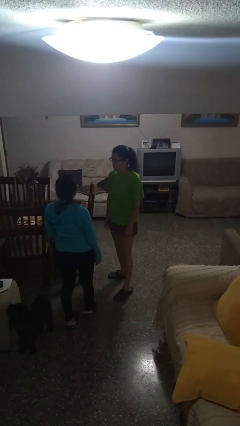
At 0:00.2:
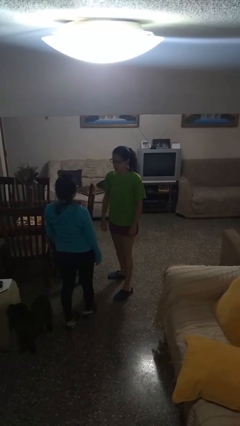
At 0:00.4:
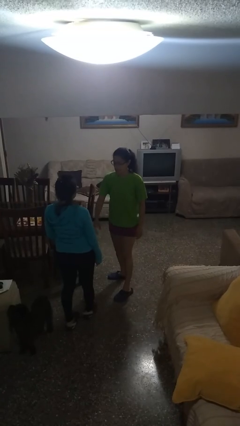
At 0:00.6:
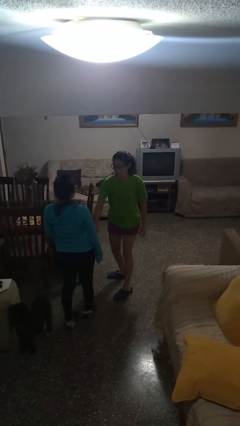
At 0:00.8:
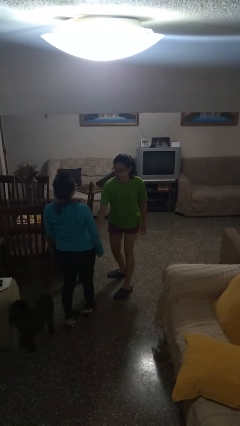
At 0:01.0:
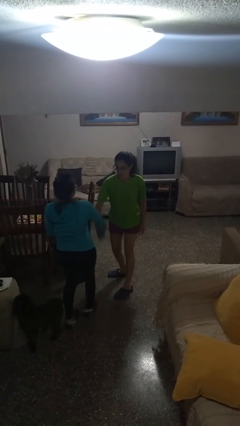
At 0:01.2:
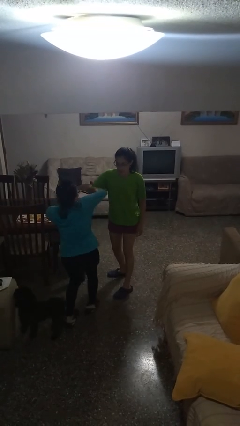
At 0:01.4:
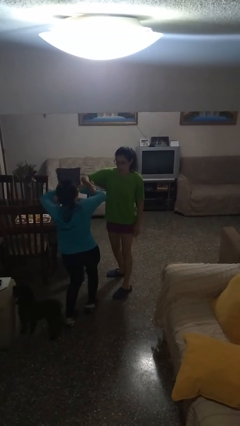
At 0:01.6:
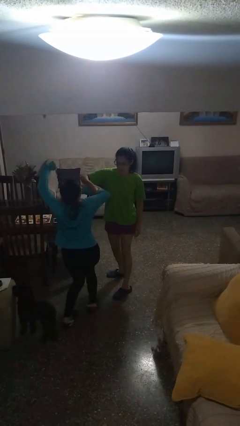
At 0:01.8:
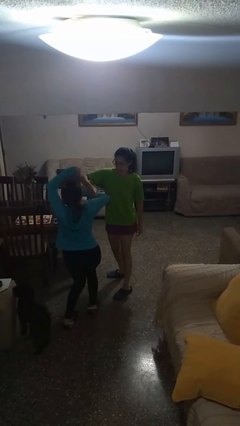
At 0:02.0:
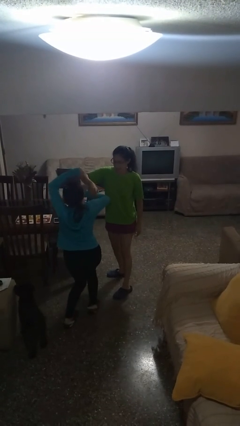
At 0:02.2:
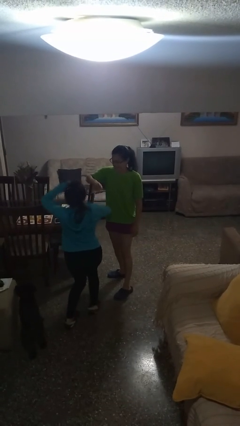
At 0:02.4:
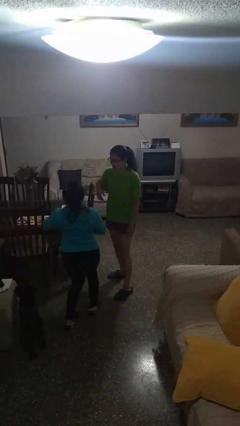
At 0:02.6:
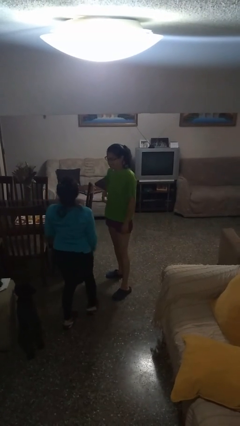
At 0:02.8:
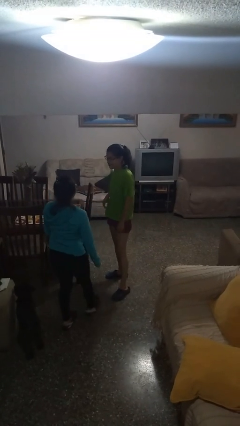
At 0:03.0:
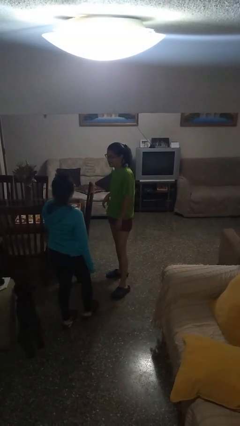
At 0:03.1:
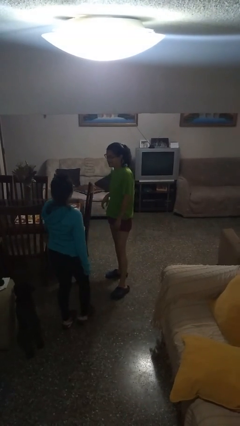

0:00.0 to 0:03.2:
person grabs person by forearm

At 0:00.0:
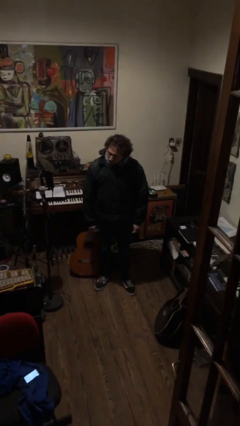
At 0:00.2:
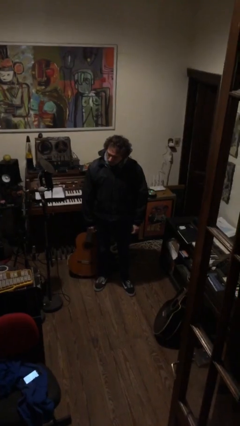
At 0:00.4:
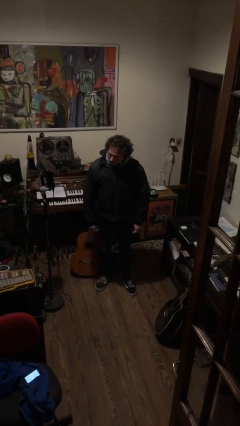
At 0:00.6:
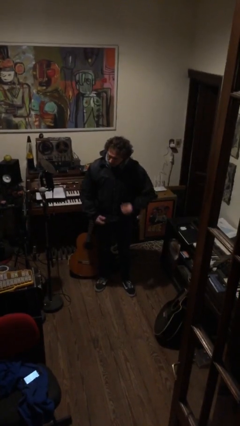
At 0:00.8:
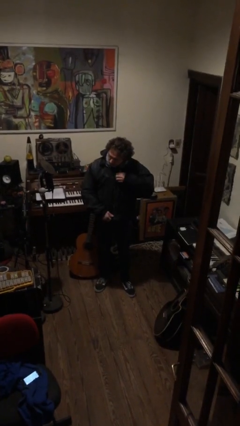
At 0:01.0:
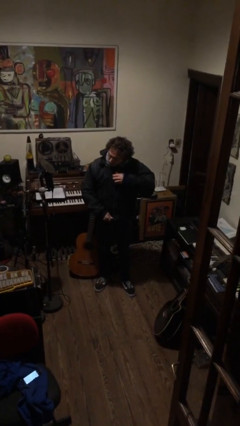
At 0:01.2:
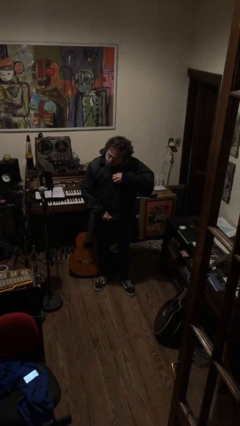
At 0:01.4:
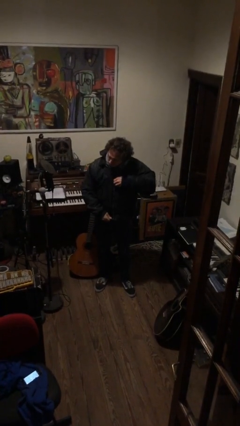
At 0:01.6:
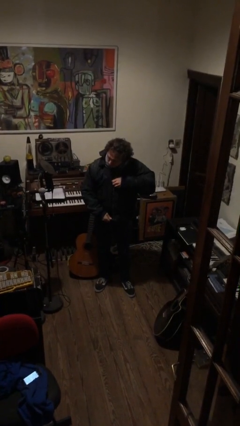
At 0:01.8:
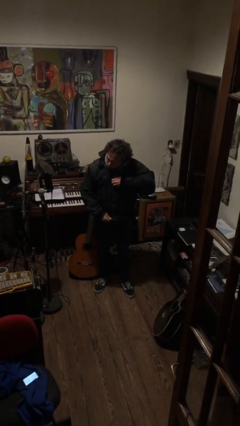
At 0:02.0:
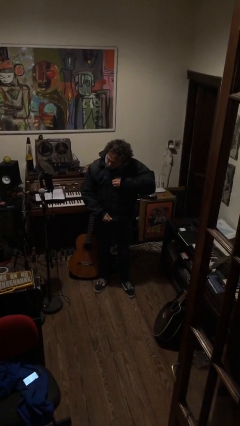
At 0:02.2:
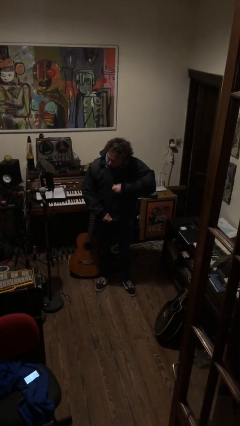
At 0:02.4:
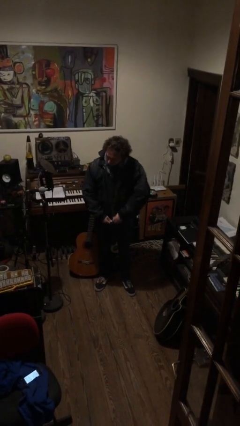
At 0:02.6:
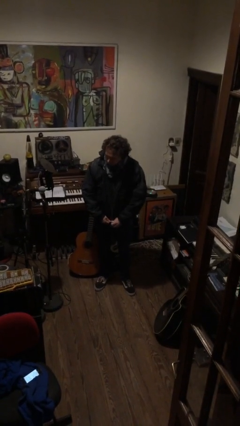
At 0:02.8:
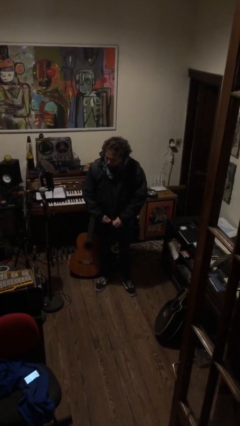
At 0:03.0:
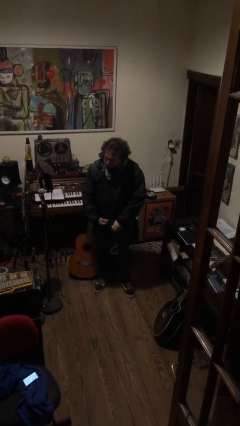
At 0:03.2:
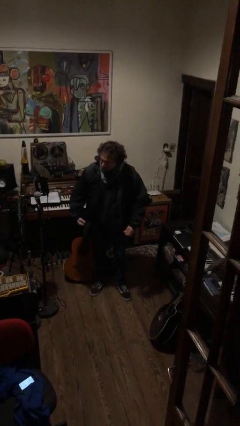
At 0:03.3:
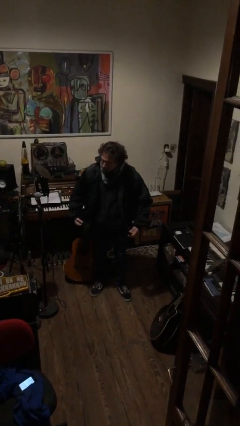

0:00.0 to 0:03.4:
person unzips jacket

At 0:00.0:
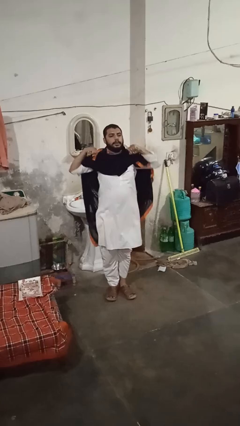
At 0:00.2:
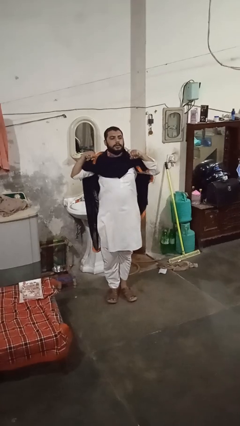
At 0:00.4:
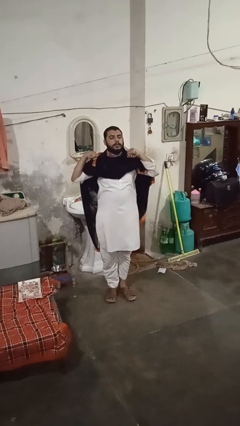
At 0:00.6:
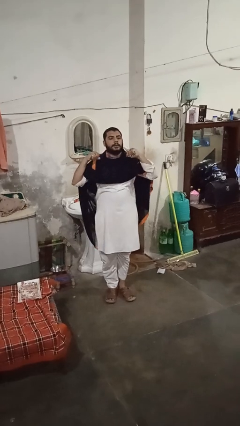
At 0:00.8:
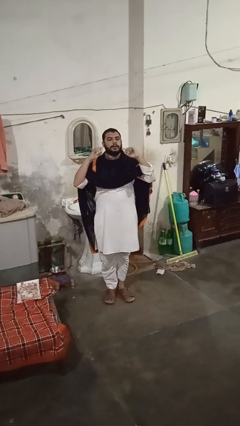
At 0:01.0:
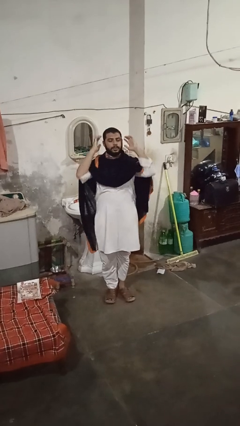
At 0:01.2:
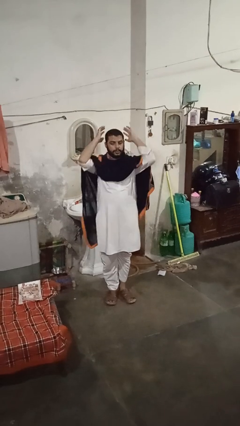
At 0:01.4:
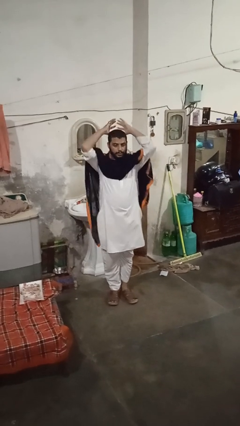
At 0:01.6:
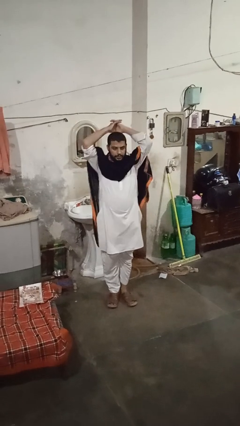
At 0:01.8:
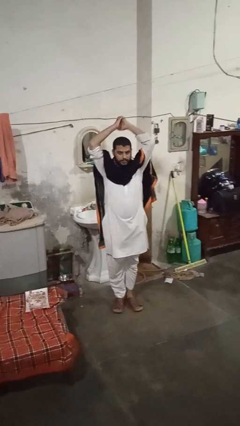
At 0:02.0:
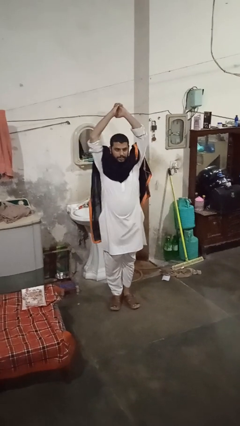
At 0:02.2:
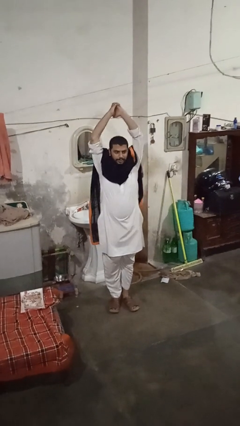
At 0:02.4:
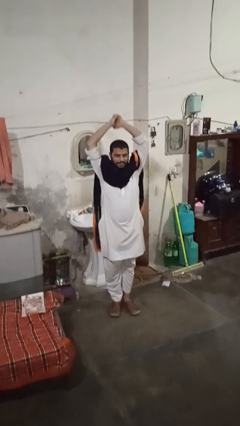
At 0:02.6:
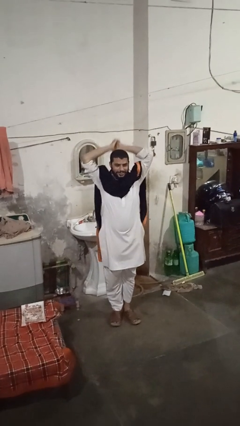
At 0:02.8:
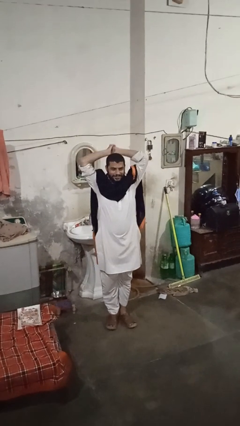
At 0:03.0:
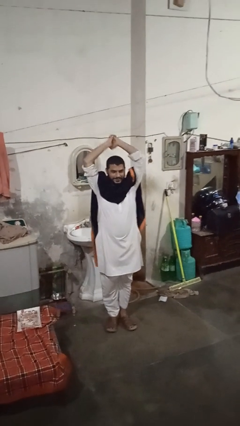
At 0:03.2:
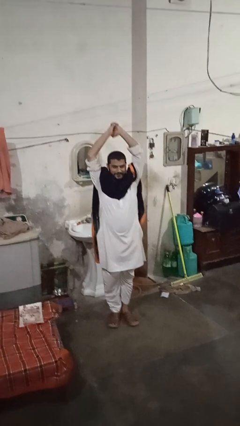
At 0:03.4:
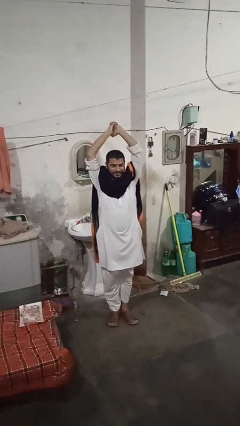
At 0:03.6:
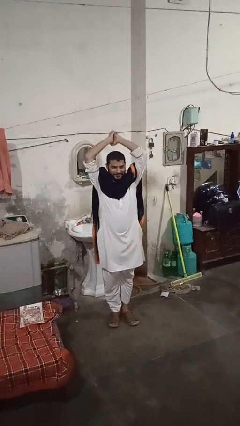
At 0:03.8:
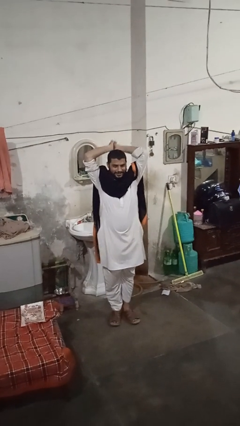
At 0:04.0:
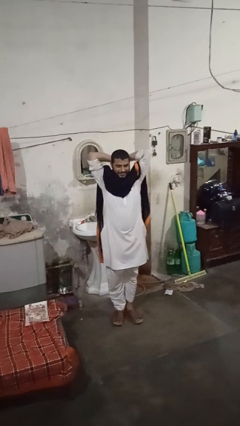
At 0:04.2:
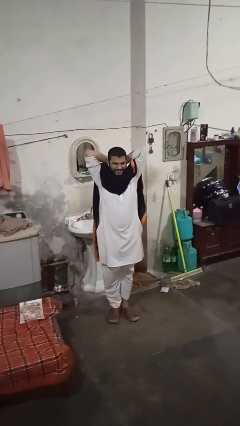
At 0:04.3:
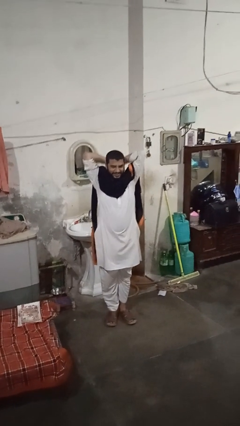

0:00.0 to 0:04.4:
person stretches arms over head

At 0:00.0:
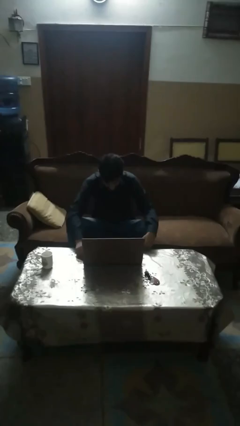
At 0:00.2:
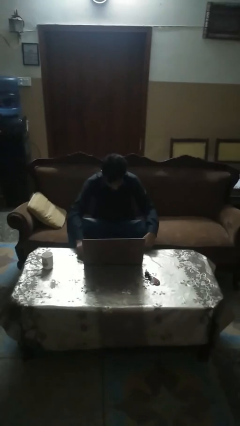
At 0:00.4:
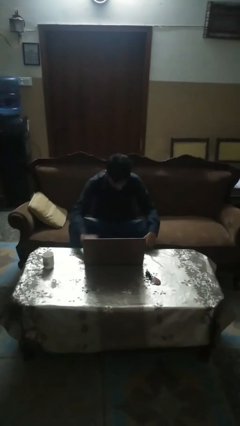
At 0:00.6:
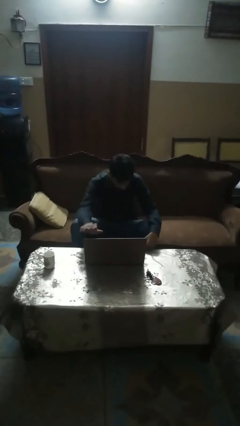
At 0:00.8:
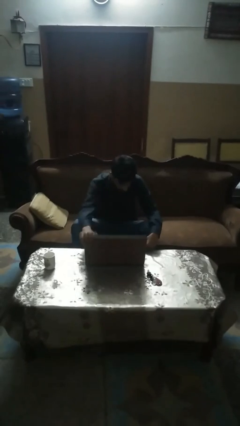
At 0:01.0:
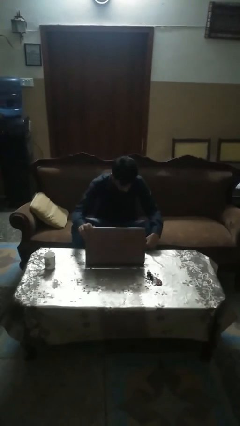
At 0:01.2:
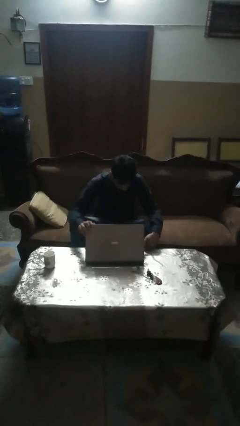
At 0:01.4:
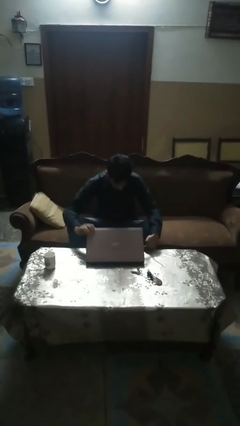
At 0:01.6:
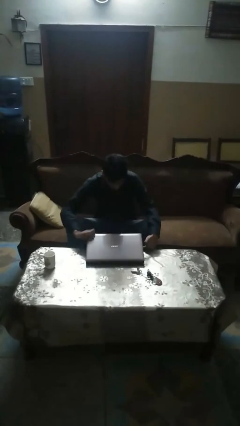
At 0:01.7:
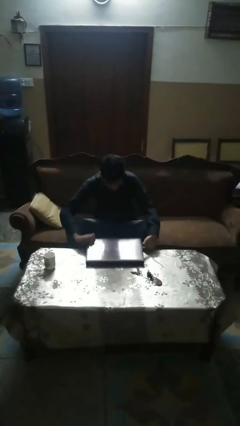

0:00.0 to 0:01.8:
person closes laptop

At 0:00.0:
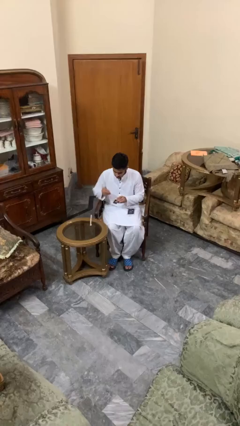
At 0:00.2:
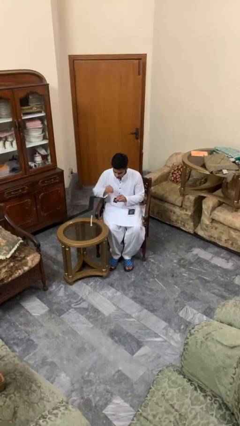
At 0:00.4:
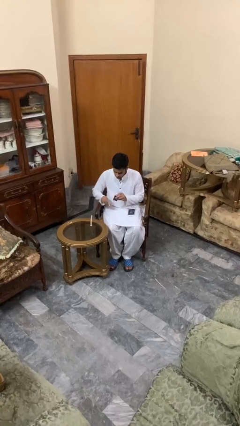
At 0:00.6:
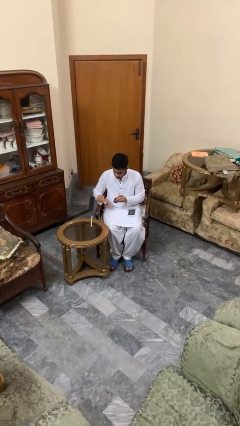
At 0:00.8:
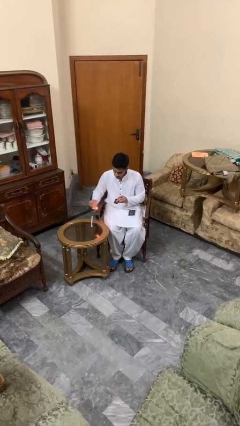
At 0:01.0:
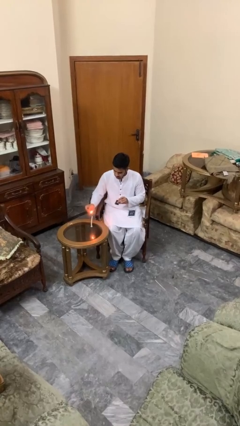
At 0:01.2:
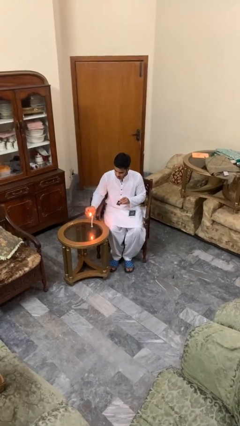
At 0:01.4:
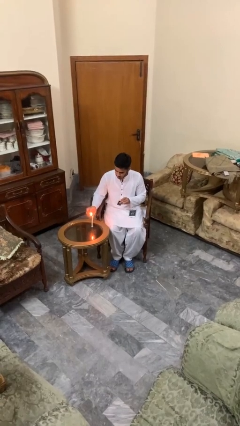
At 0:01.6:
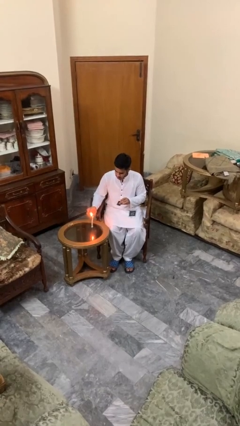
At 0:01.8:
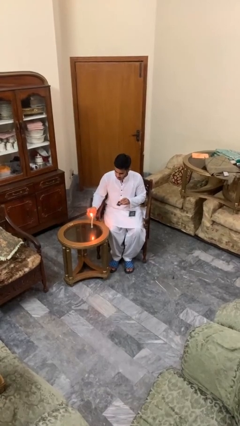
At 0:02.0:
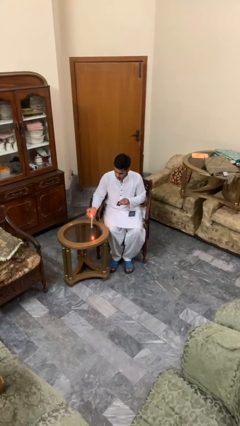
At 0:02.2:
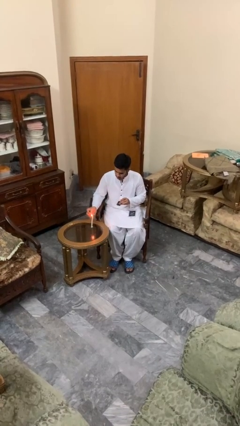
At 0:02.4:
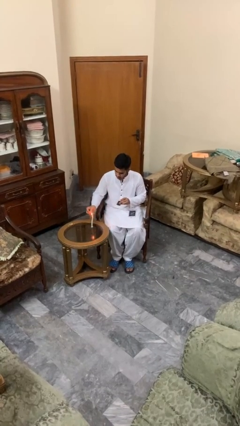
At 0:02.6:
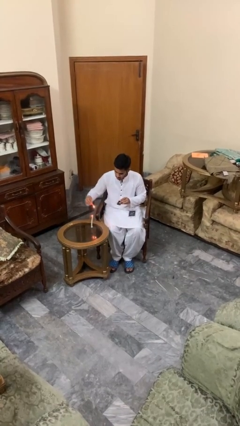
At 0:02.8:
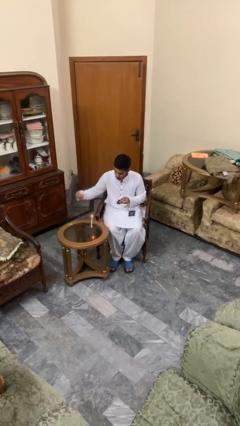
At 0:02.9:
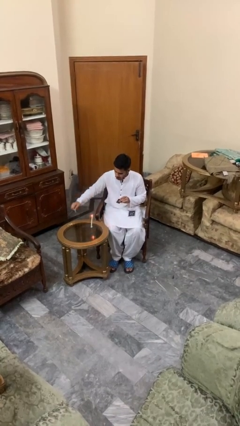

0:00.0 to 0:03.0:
person lights candle

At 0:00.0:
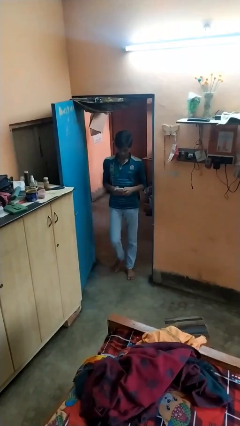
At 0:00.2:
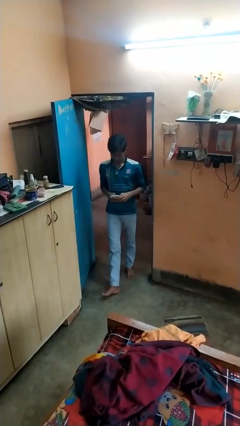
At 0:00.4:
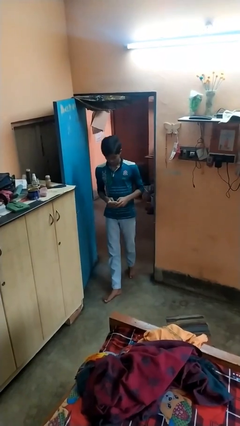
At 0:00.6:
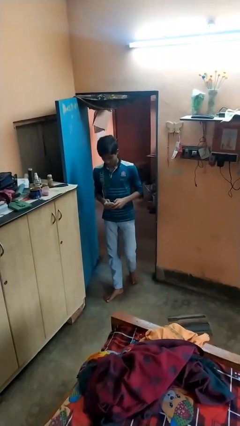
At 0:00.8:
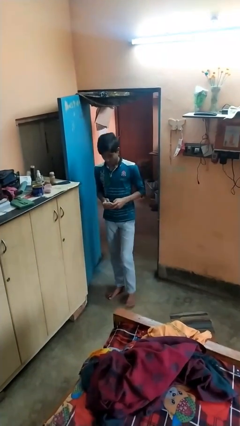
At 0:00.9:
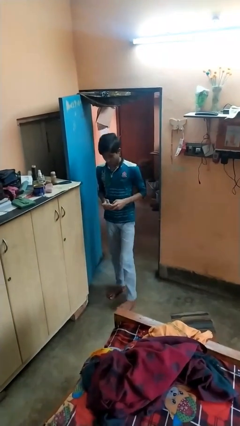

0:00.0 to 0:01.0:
person enters scene through structure

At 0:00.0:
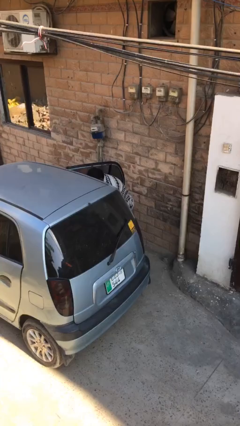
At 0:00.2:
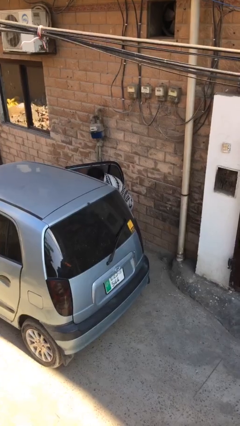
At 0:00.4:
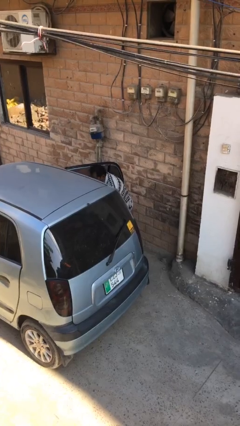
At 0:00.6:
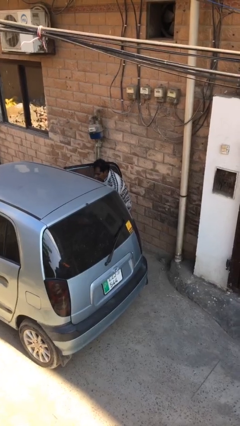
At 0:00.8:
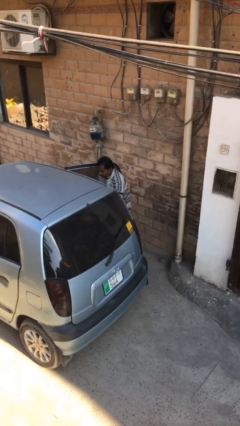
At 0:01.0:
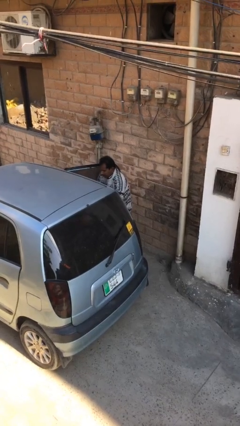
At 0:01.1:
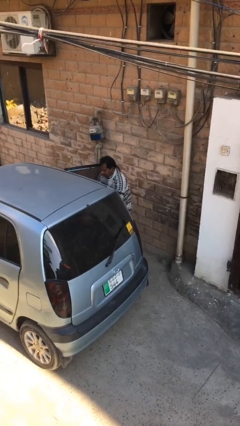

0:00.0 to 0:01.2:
person loads car
